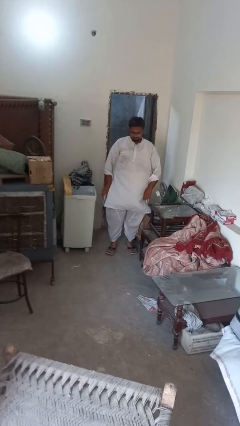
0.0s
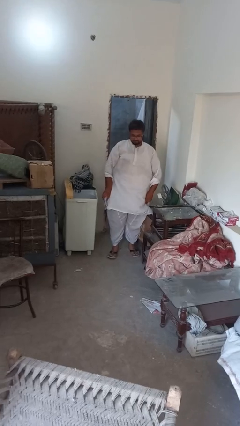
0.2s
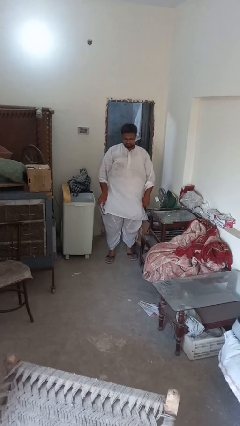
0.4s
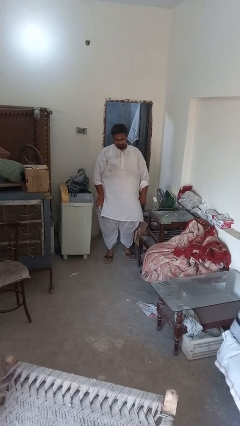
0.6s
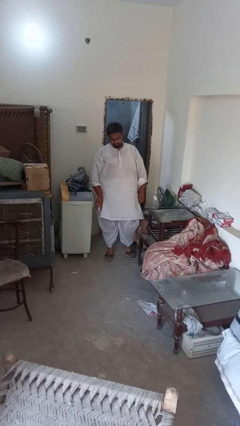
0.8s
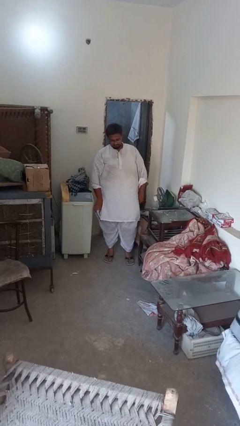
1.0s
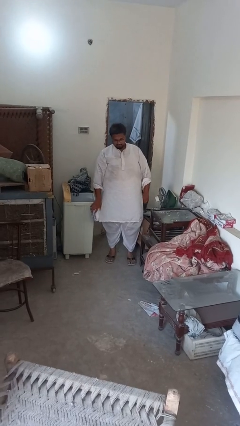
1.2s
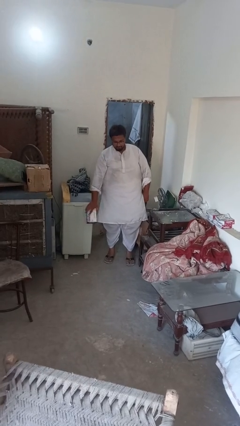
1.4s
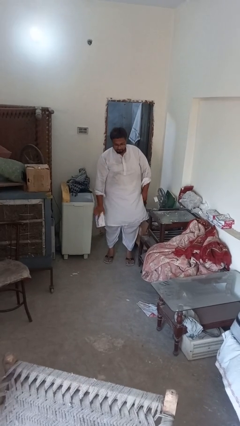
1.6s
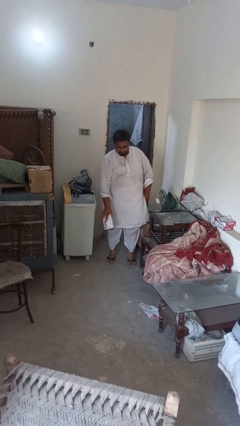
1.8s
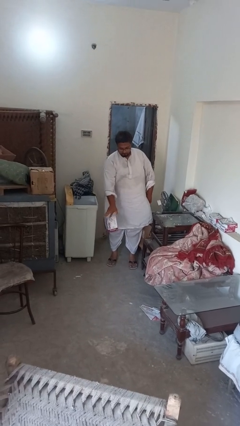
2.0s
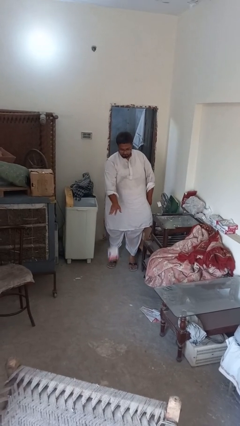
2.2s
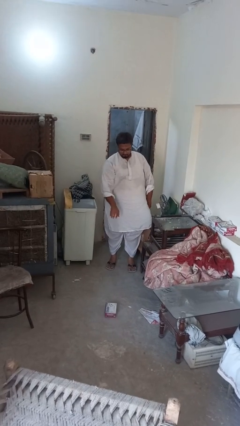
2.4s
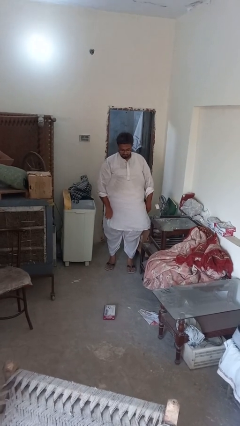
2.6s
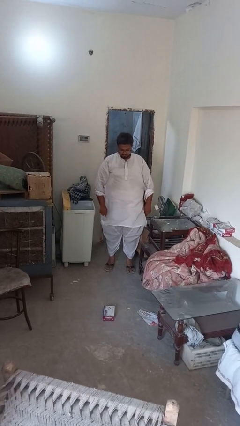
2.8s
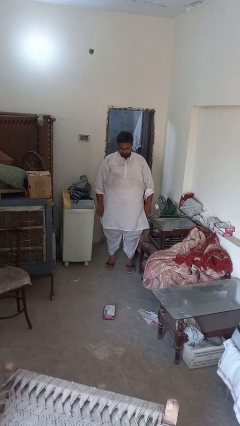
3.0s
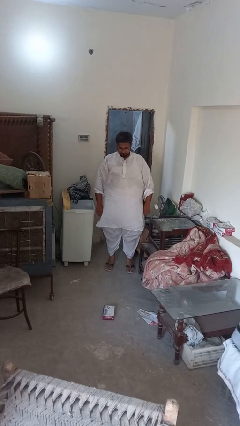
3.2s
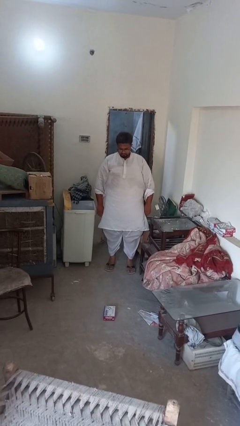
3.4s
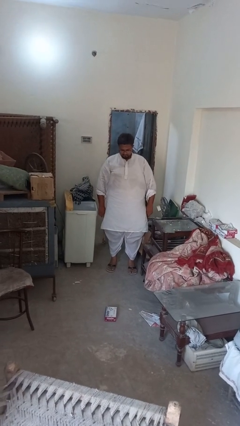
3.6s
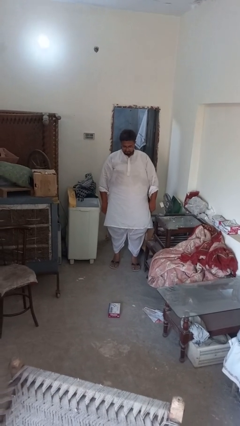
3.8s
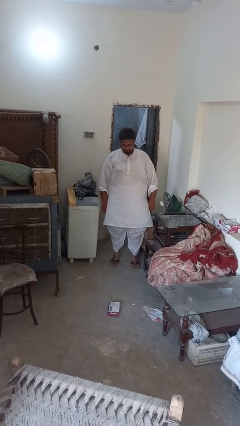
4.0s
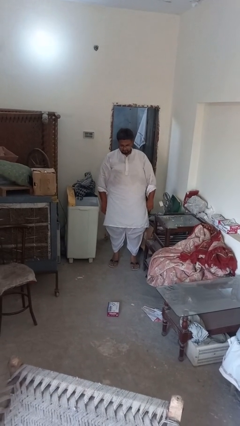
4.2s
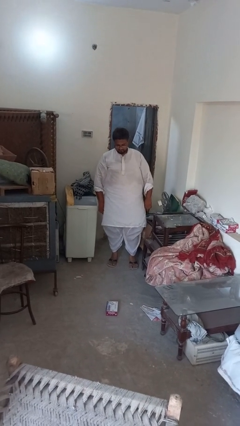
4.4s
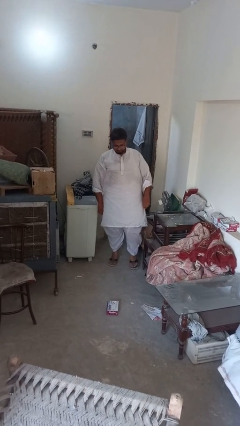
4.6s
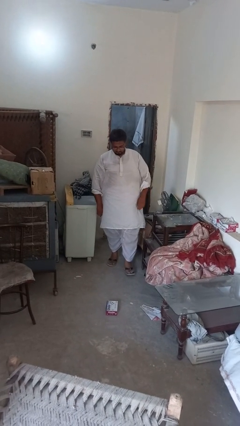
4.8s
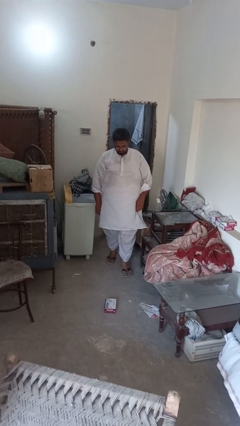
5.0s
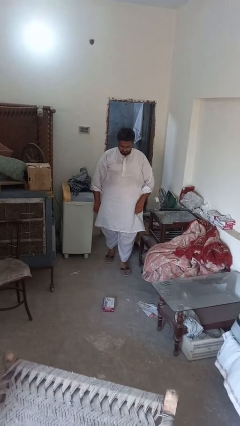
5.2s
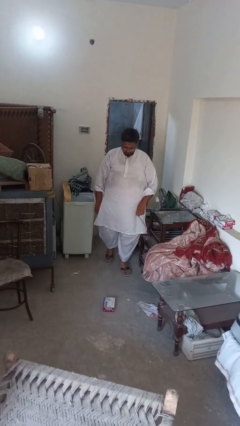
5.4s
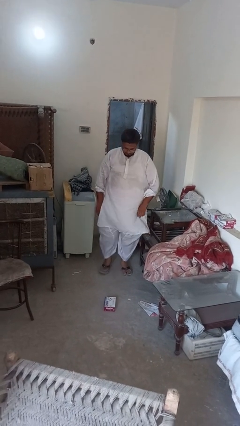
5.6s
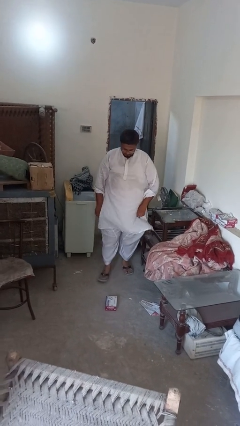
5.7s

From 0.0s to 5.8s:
person throws object to ground

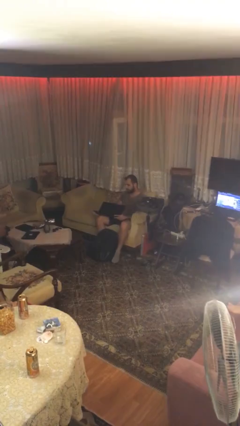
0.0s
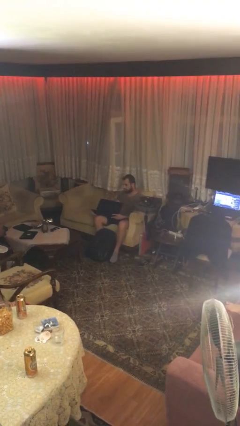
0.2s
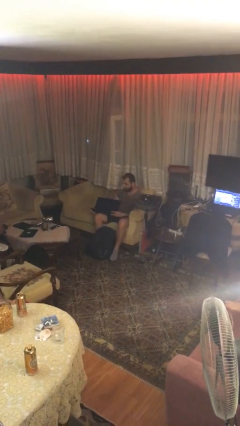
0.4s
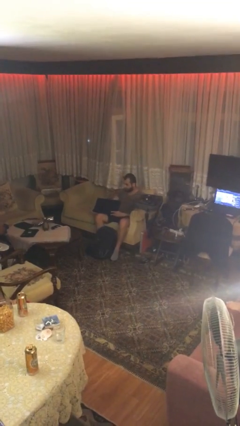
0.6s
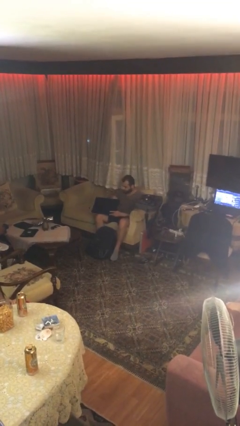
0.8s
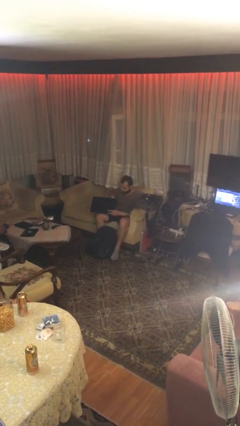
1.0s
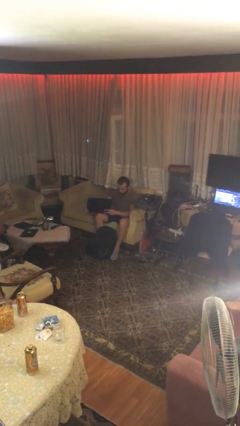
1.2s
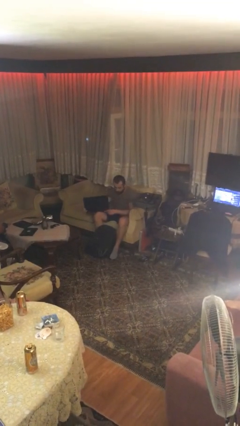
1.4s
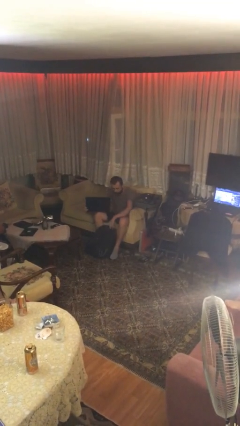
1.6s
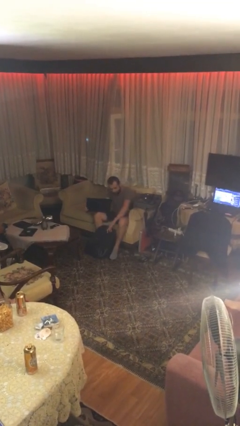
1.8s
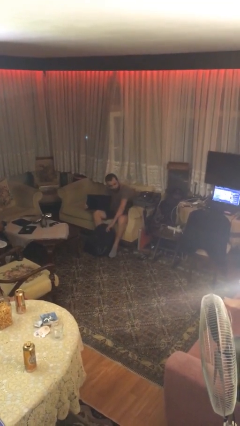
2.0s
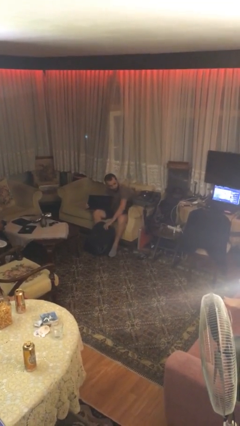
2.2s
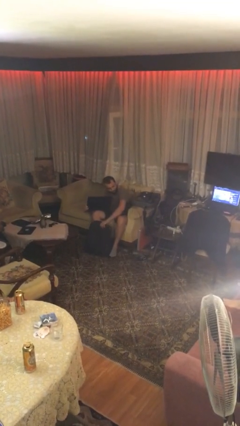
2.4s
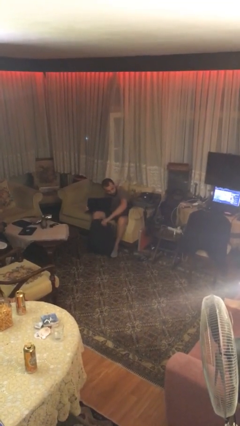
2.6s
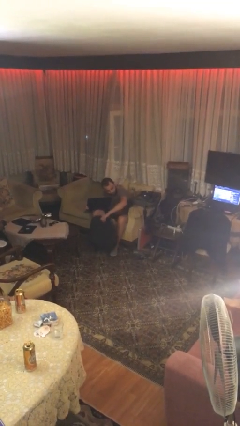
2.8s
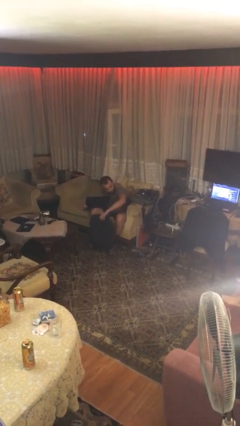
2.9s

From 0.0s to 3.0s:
person picks up object from floor

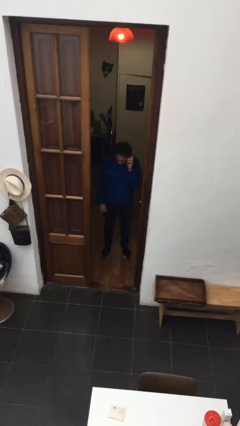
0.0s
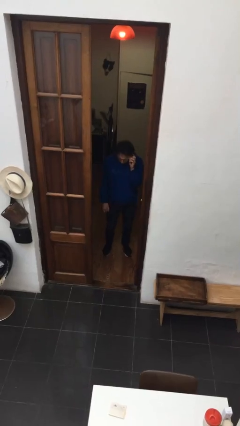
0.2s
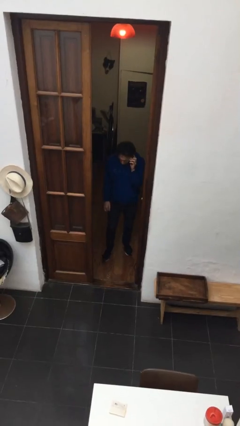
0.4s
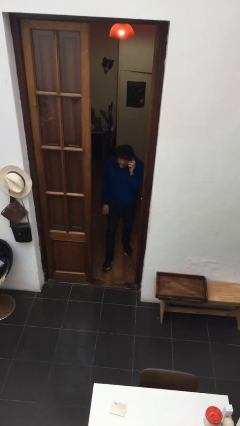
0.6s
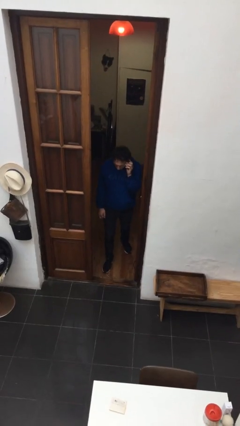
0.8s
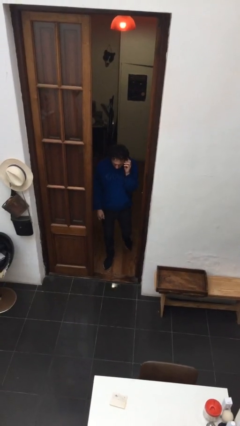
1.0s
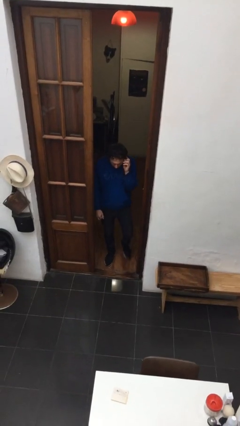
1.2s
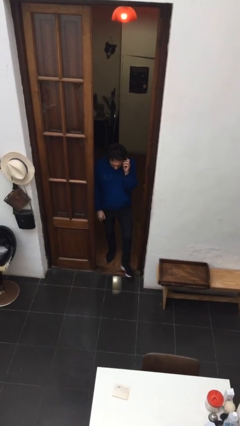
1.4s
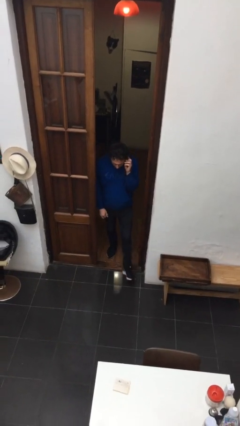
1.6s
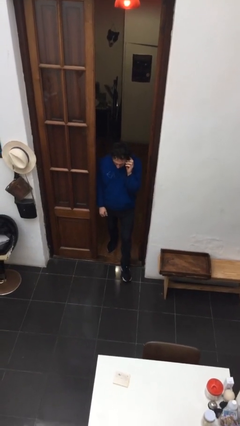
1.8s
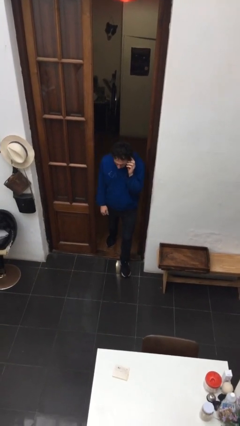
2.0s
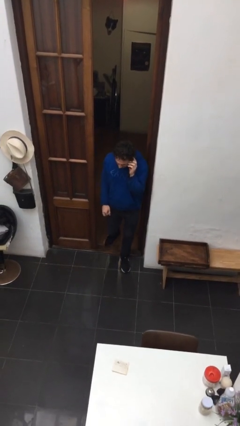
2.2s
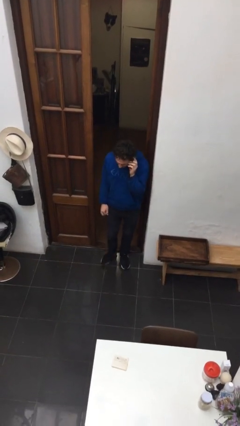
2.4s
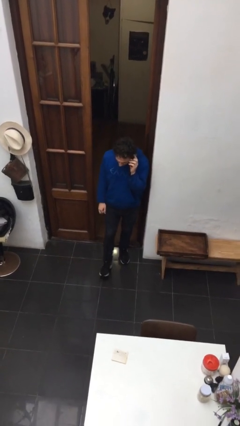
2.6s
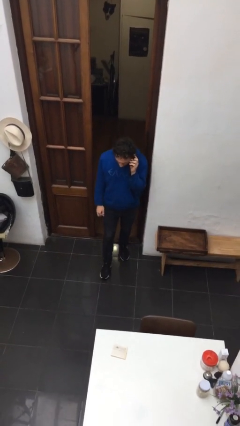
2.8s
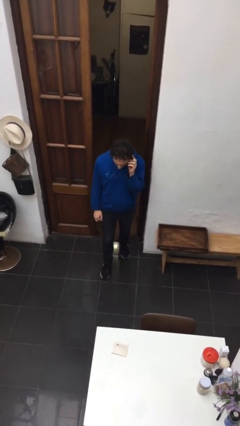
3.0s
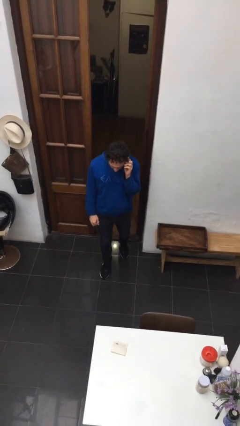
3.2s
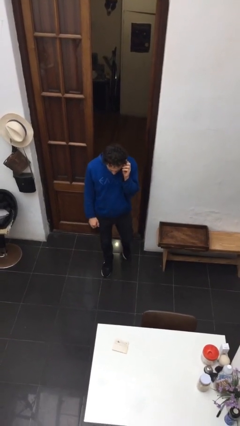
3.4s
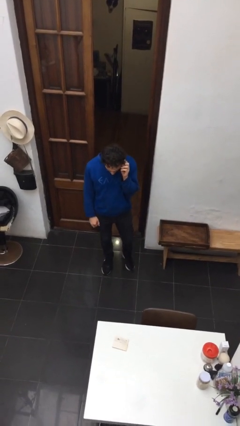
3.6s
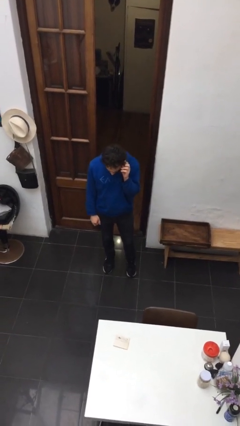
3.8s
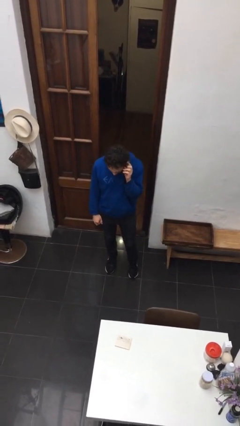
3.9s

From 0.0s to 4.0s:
person enters scene through structure

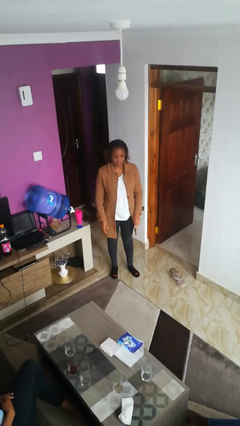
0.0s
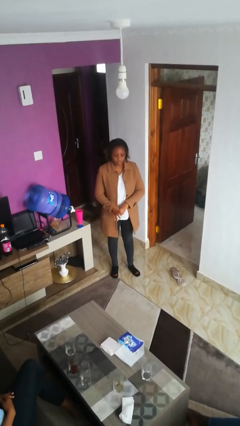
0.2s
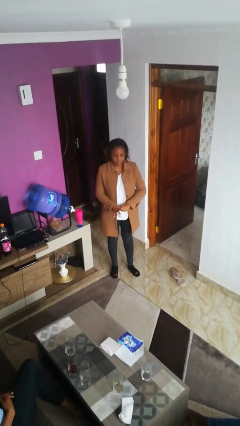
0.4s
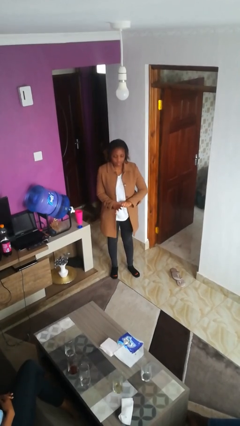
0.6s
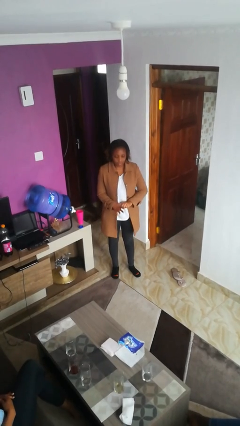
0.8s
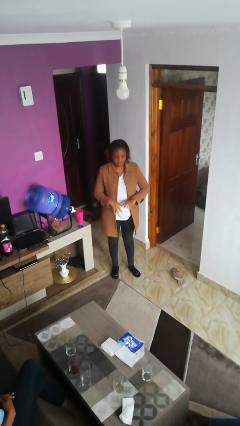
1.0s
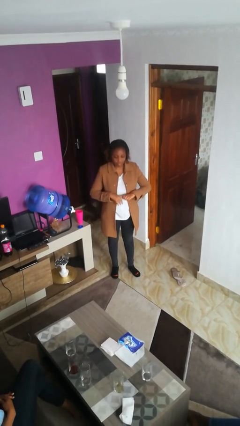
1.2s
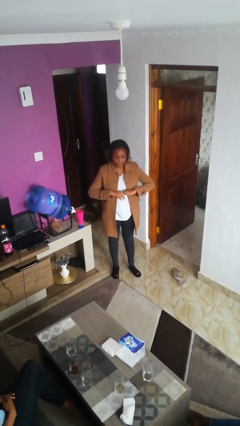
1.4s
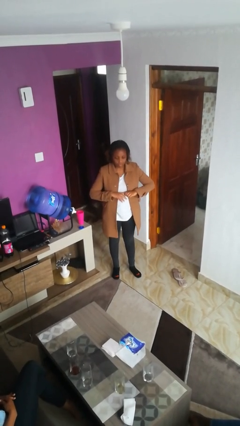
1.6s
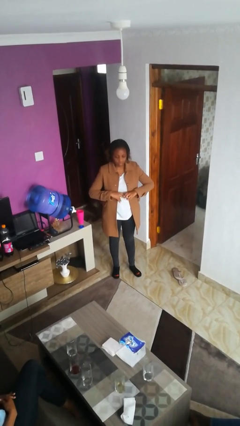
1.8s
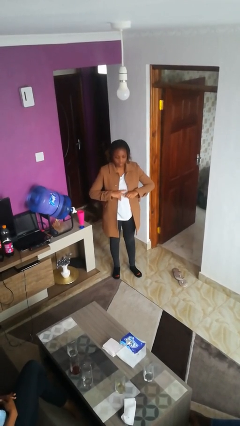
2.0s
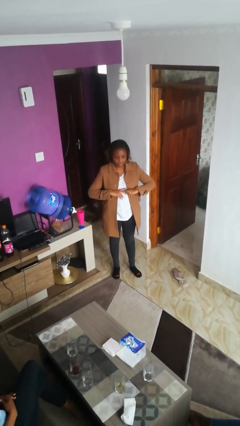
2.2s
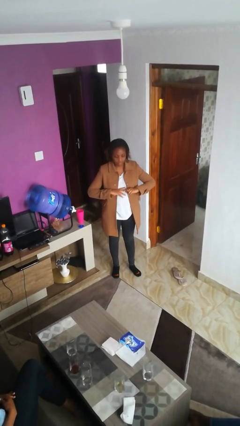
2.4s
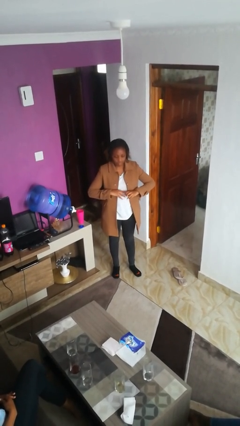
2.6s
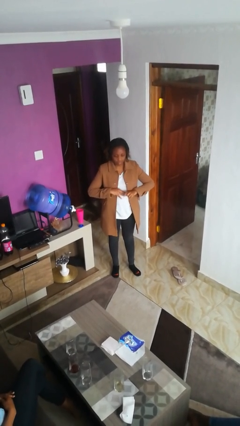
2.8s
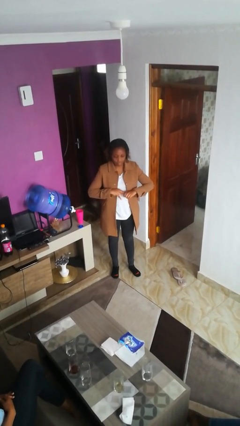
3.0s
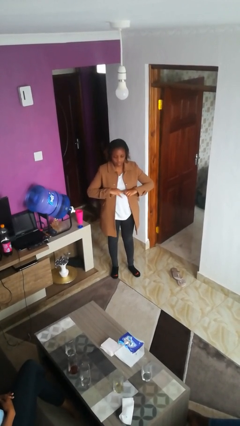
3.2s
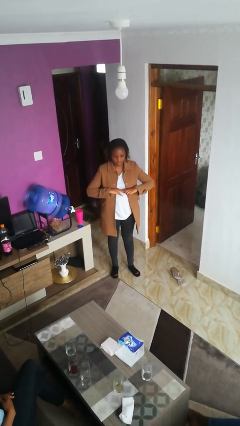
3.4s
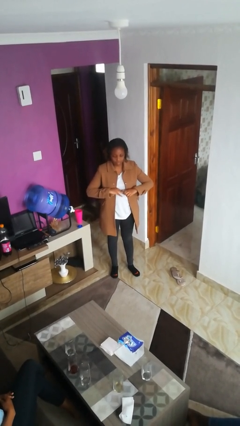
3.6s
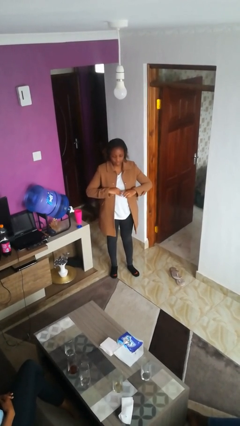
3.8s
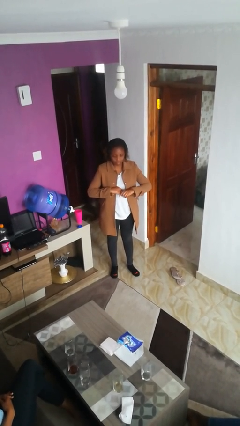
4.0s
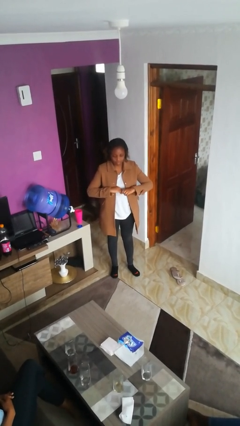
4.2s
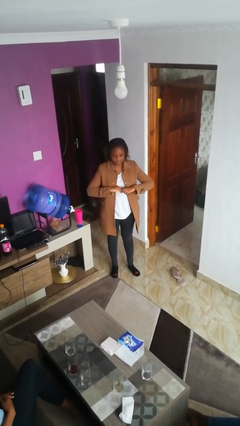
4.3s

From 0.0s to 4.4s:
person cracks knuckles

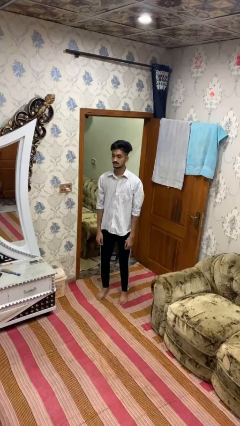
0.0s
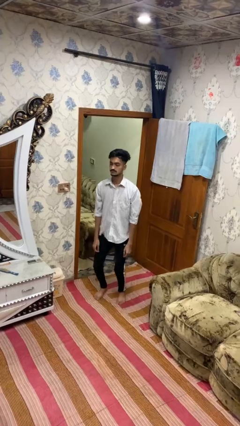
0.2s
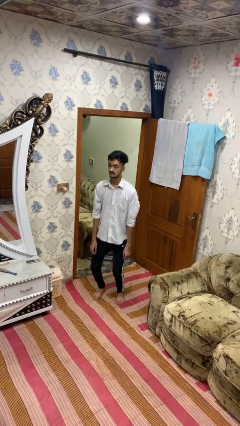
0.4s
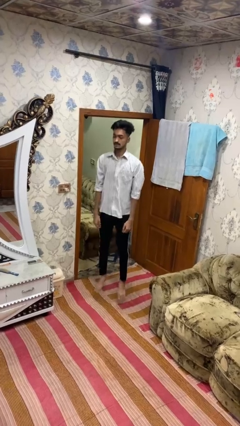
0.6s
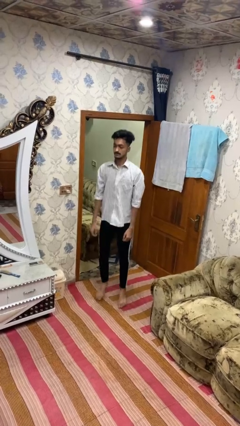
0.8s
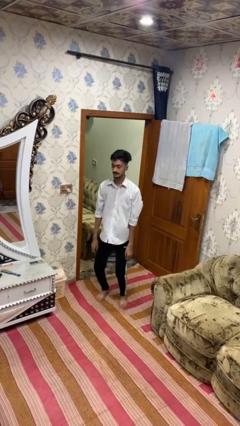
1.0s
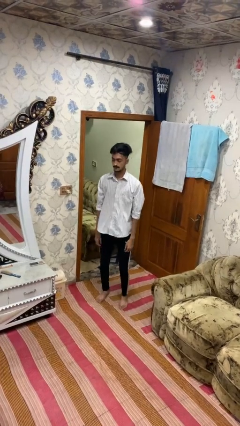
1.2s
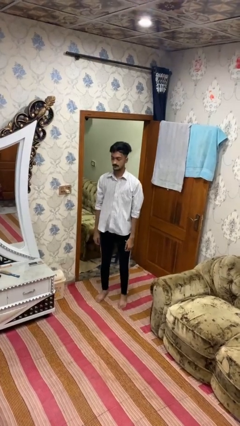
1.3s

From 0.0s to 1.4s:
person jumps
